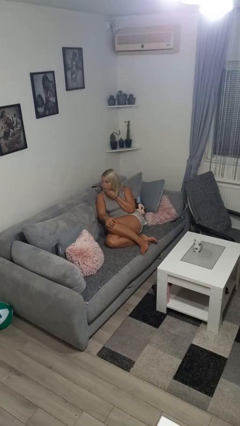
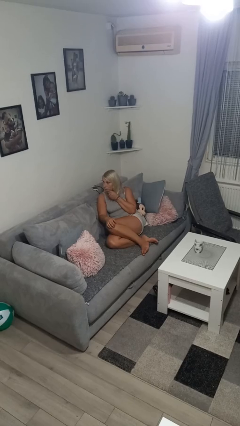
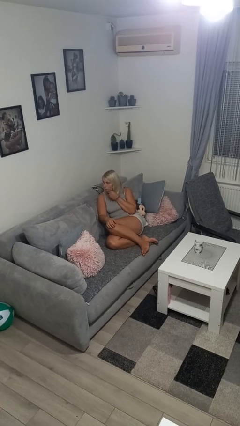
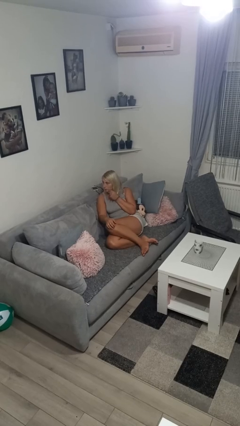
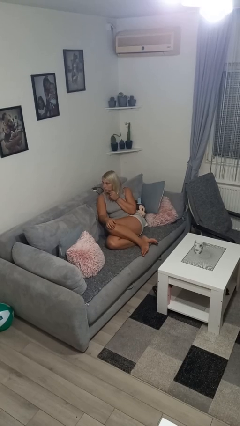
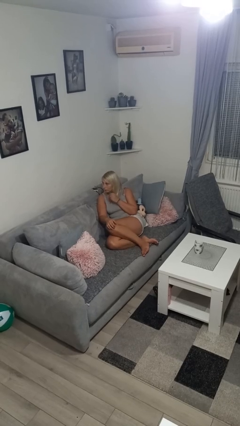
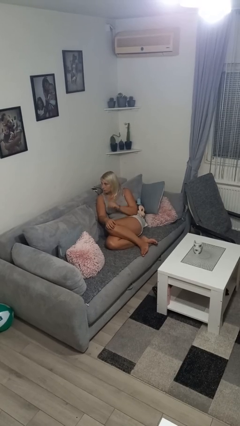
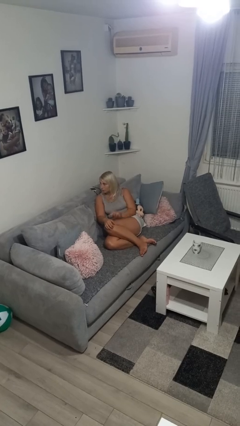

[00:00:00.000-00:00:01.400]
person strokes chin

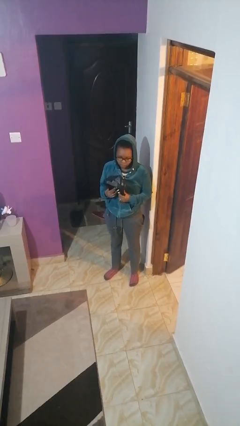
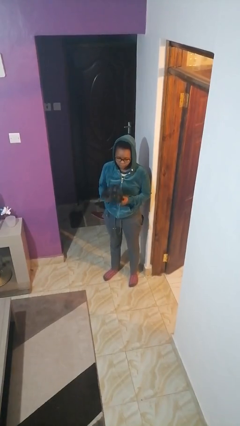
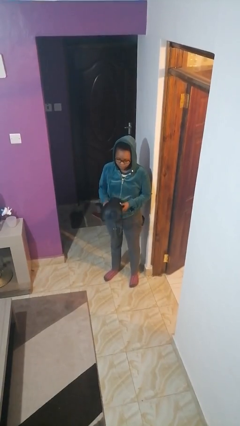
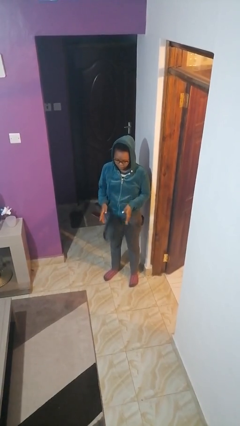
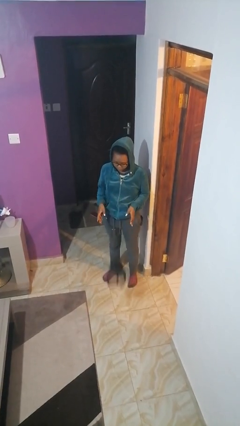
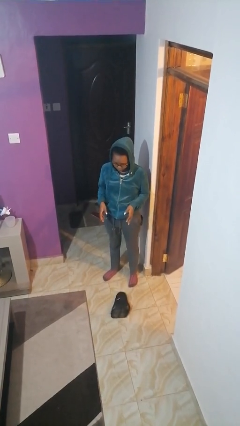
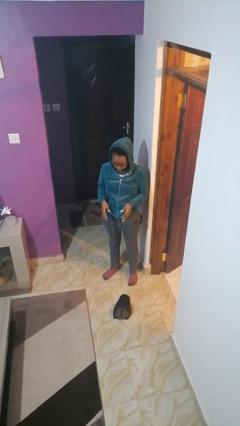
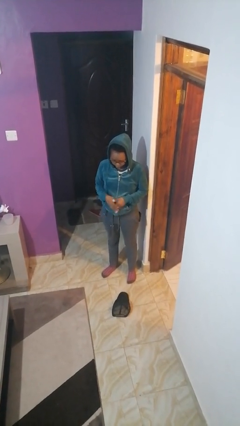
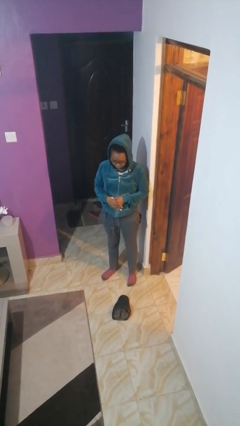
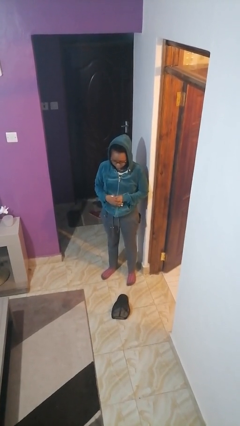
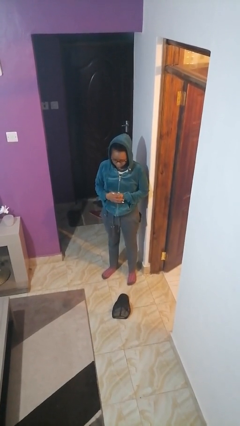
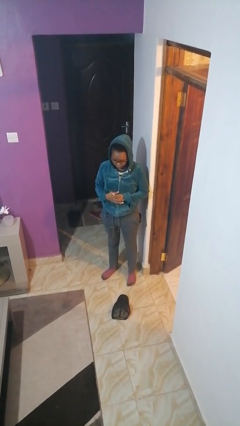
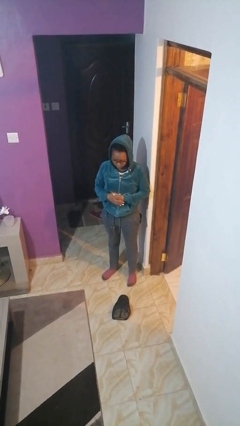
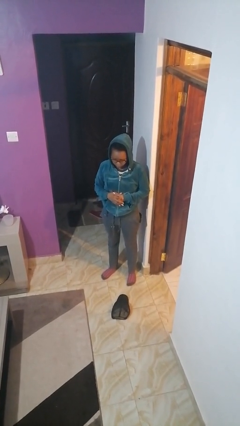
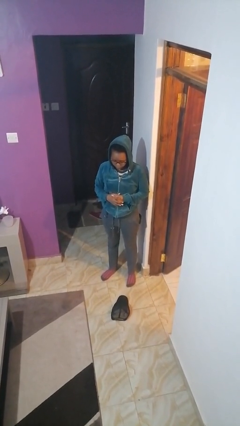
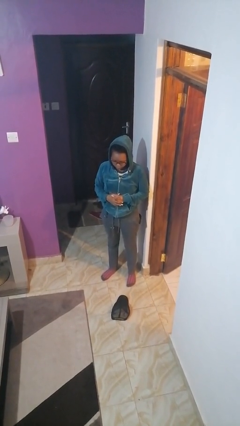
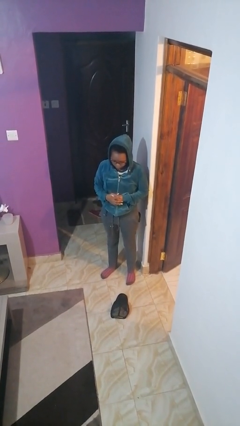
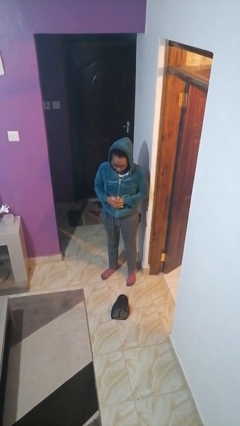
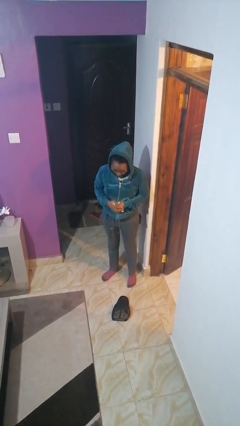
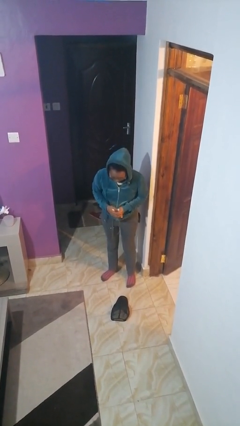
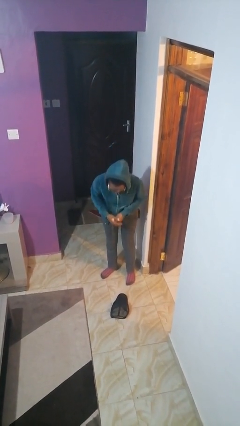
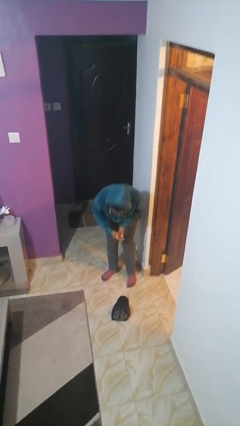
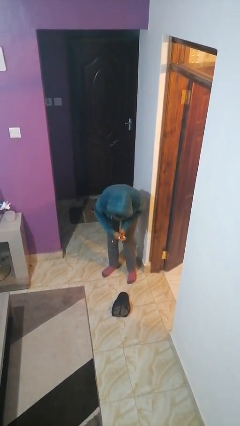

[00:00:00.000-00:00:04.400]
person drops object

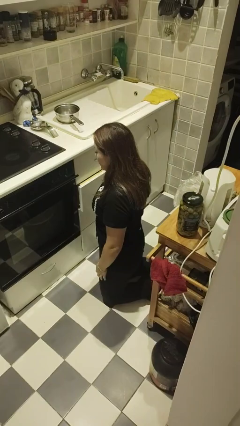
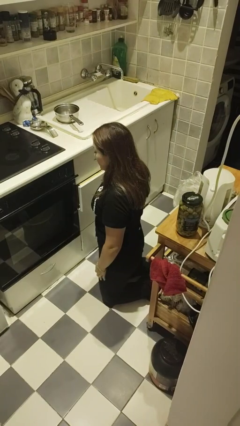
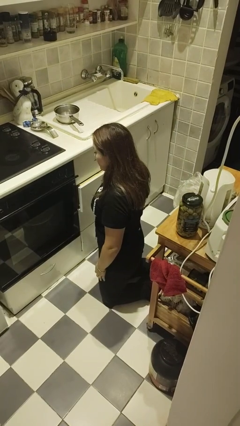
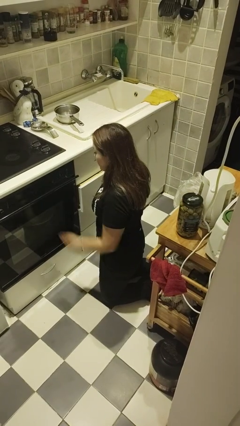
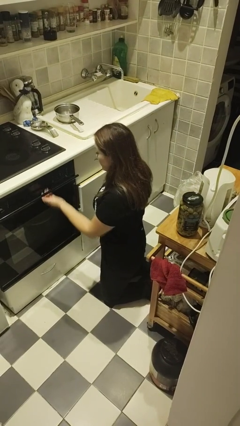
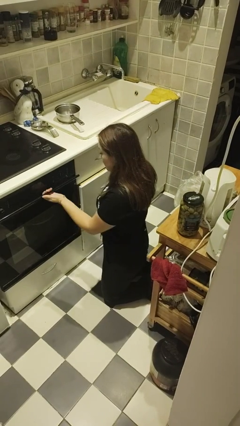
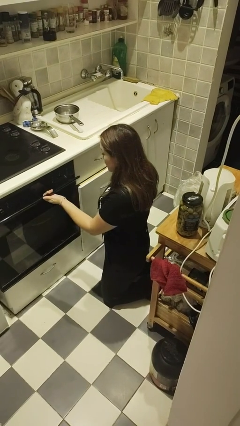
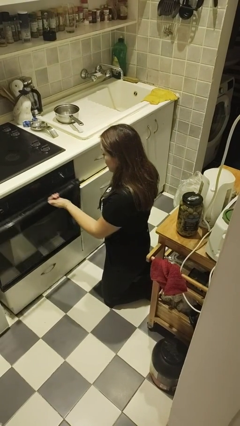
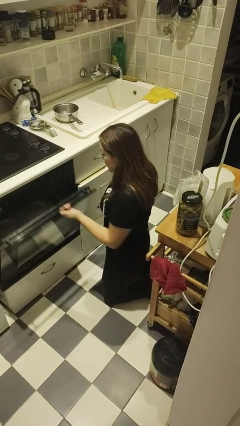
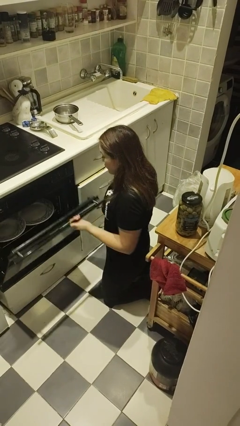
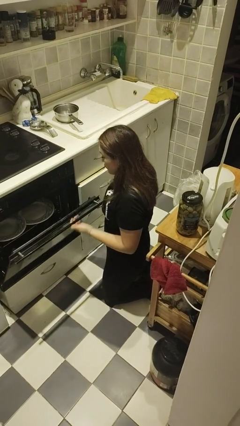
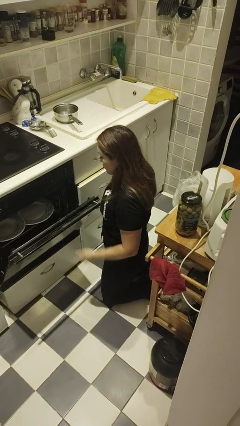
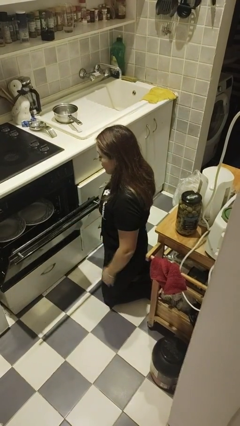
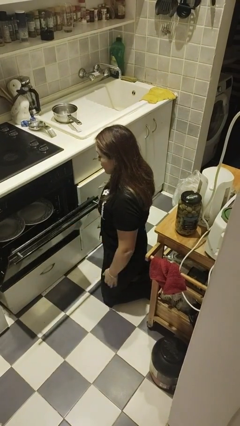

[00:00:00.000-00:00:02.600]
person opens oven door

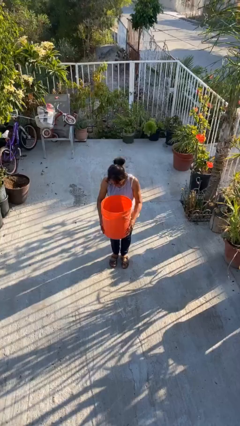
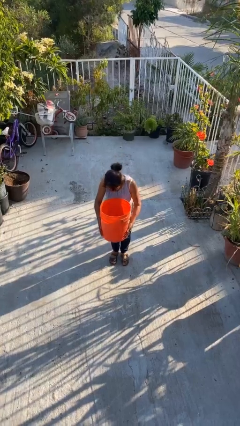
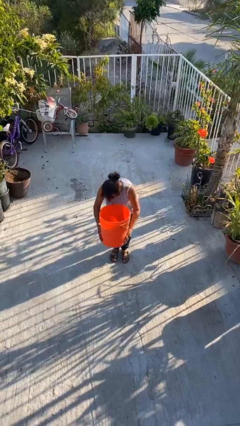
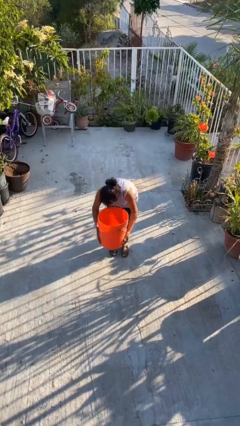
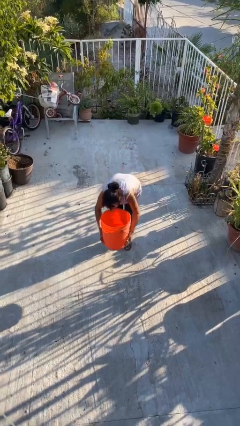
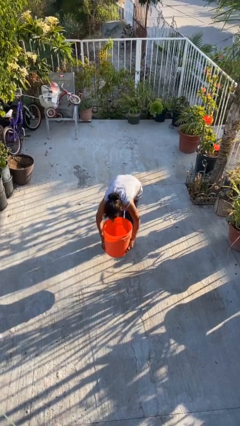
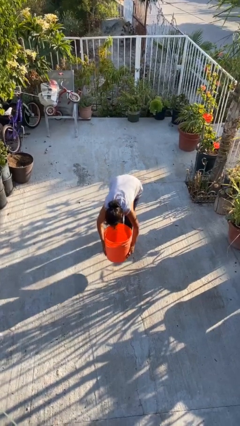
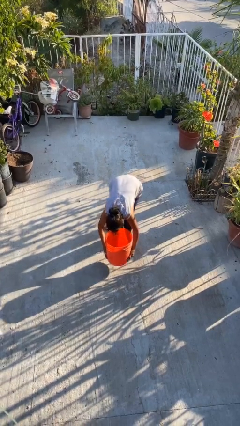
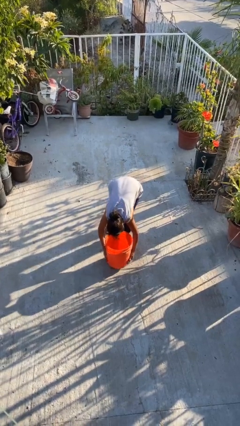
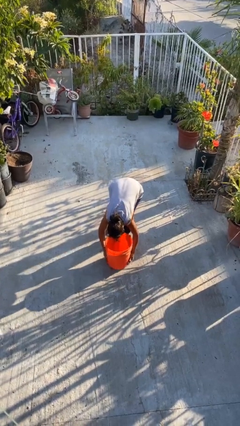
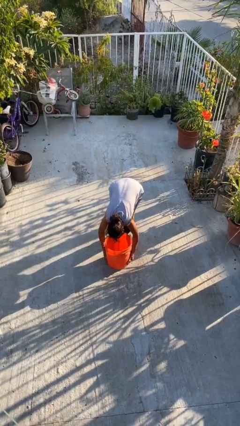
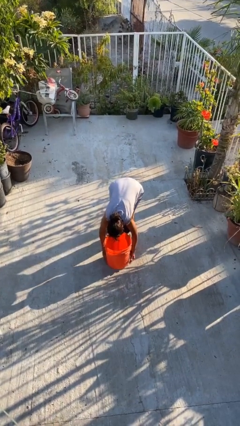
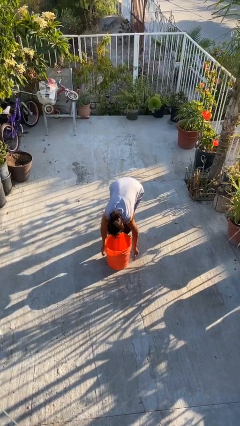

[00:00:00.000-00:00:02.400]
person puts down object on floor

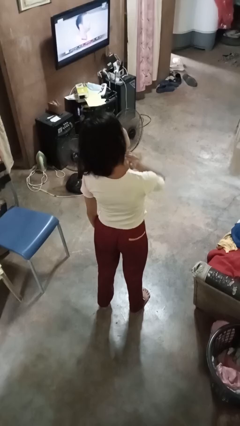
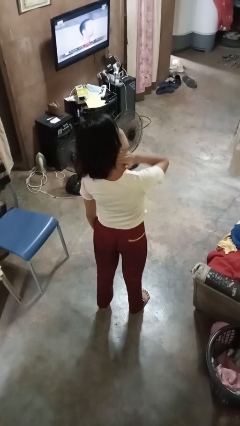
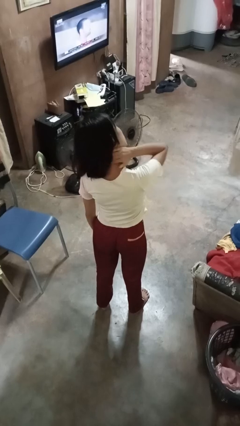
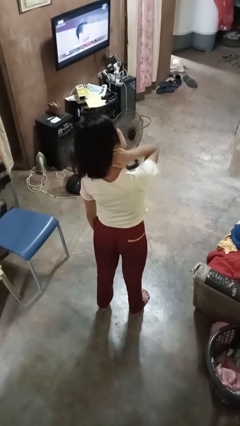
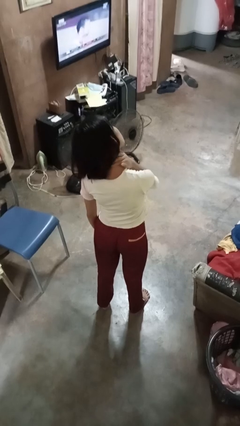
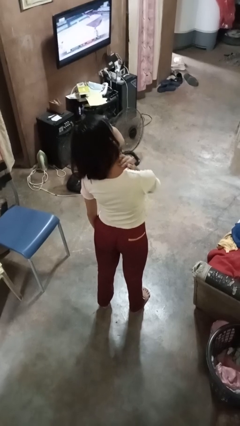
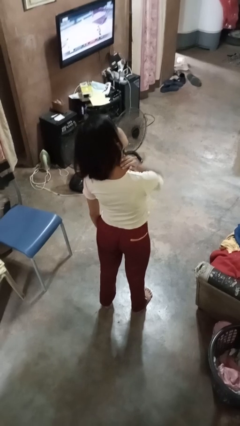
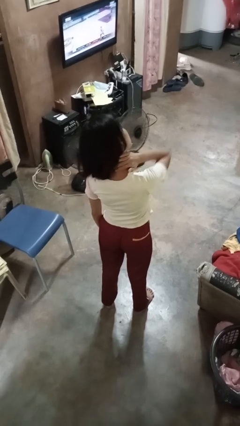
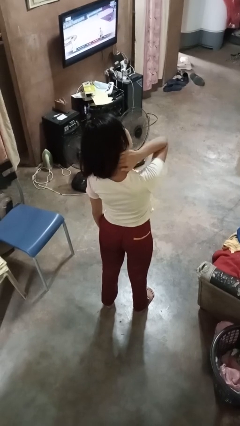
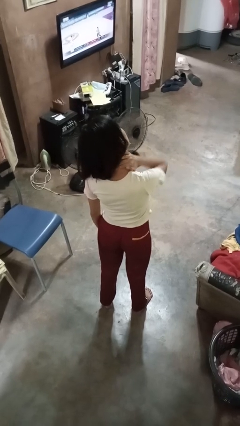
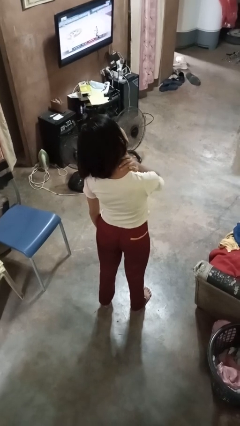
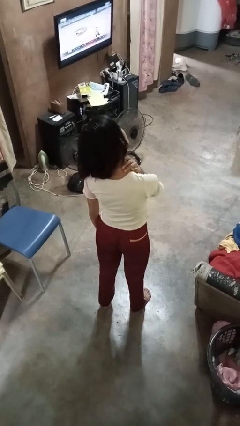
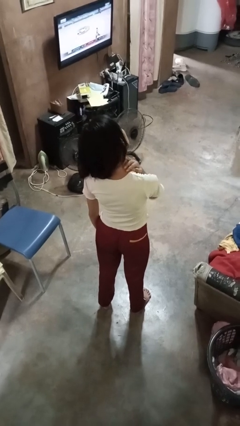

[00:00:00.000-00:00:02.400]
person rubs neck

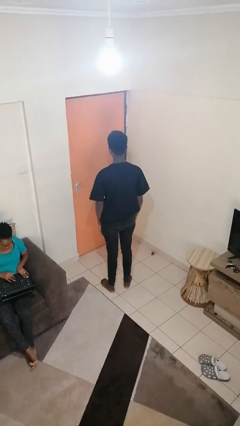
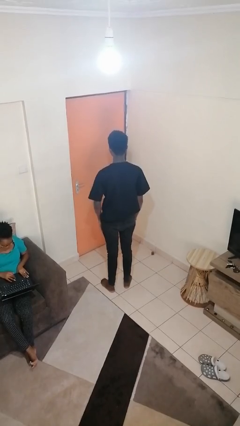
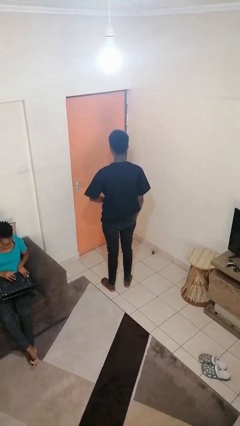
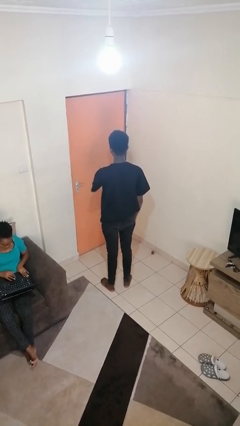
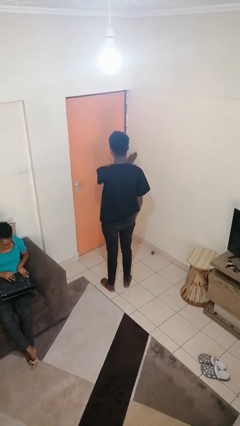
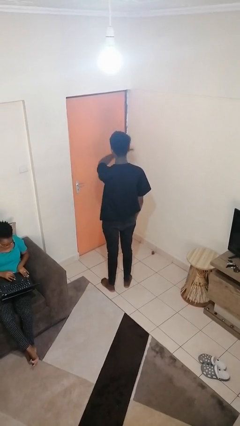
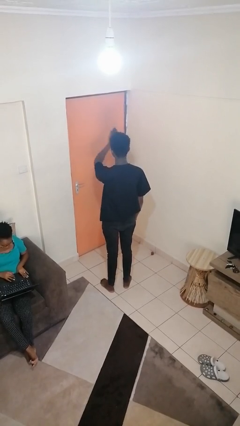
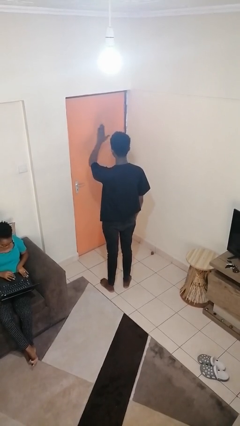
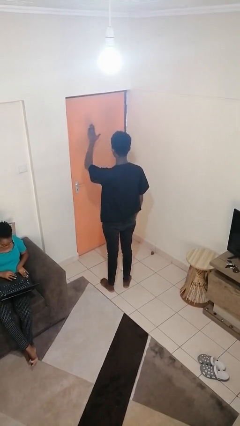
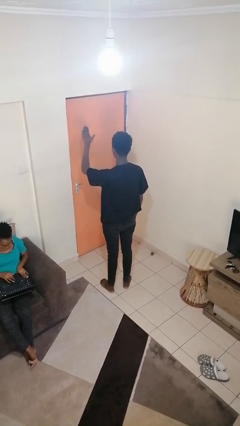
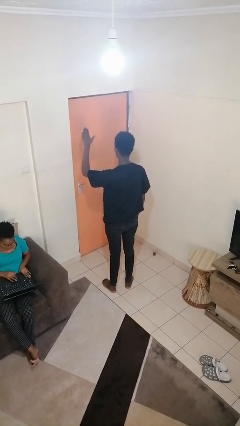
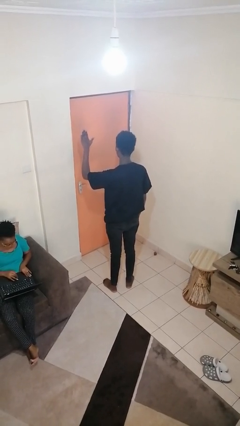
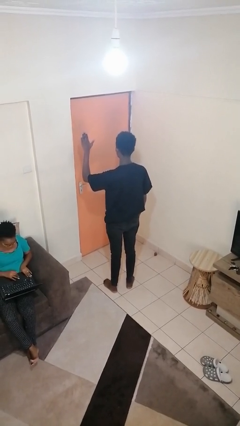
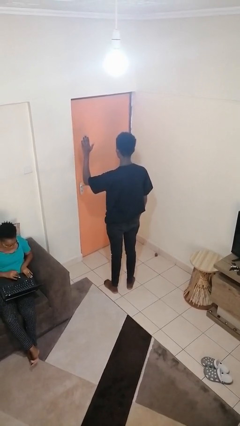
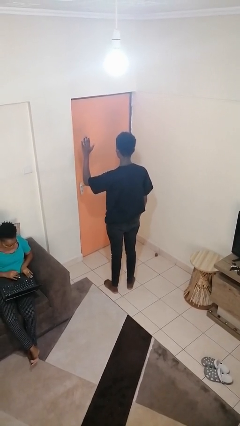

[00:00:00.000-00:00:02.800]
person gestures swipe left

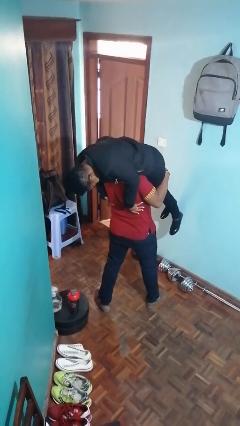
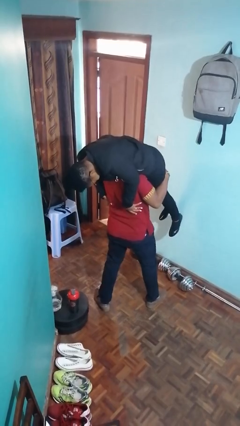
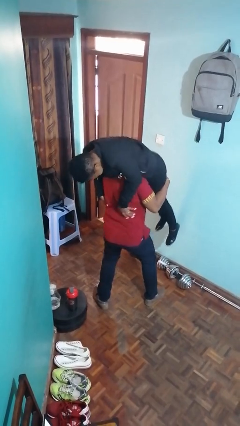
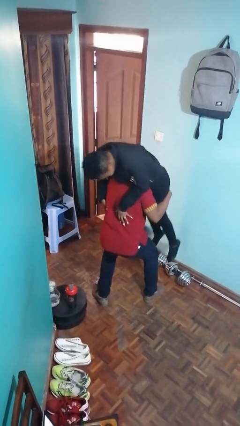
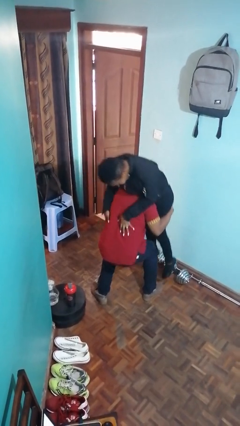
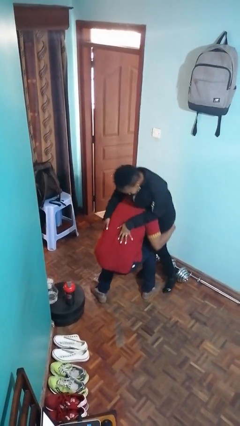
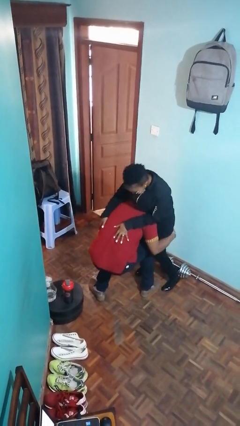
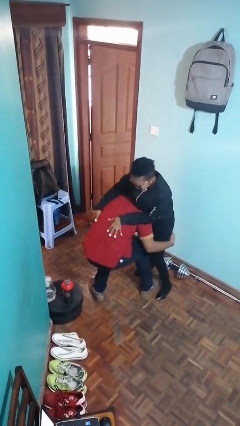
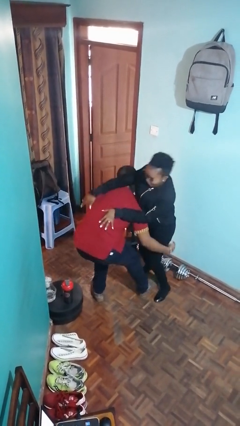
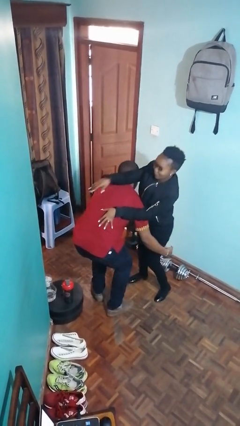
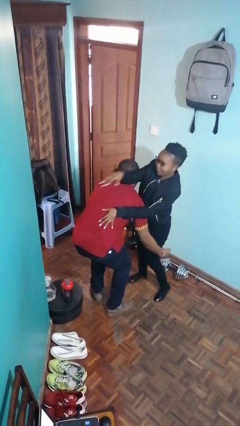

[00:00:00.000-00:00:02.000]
person puts down person
